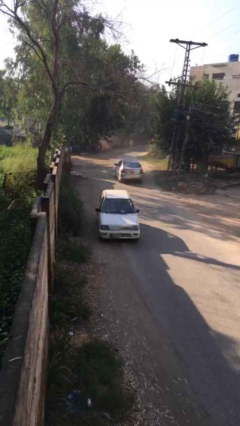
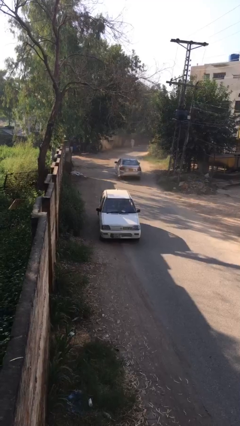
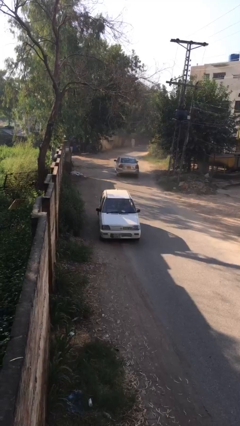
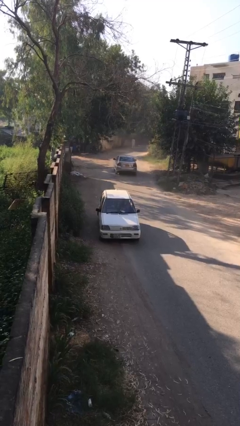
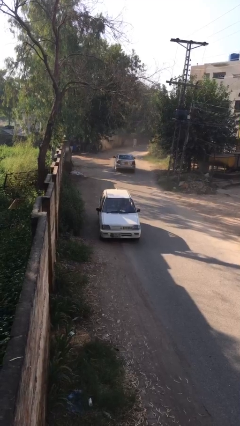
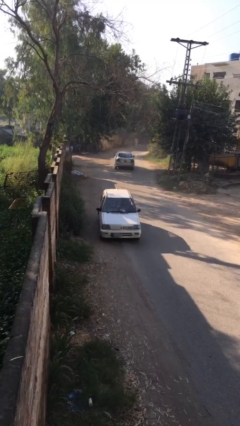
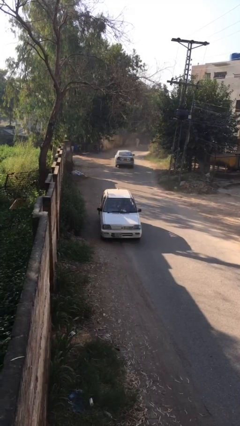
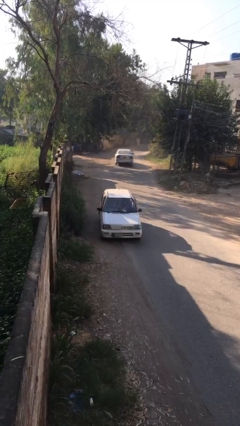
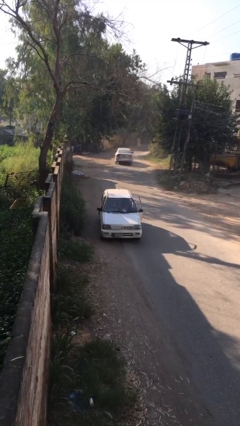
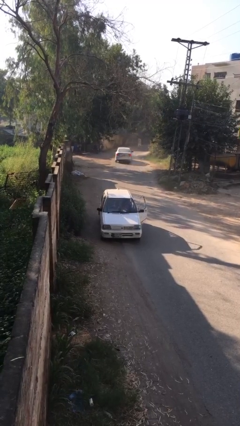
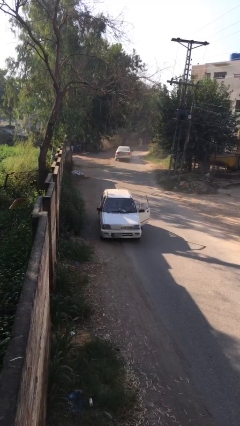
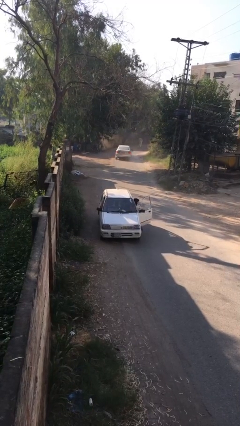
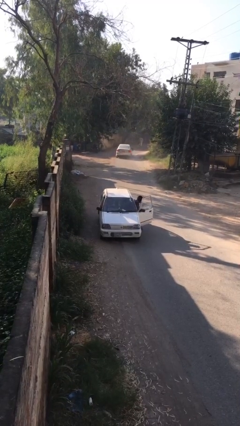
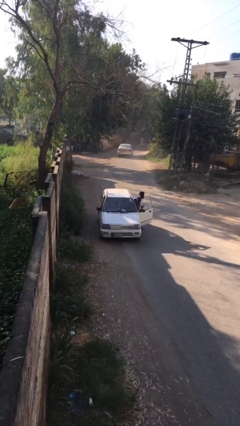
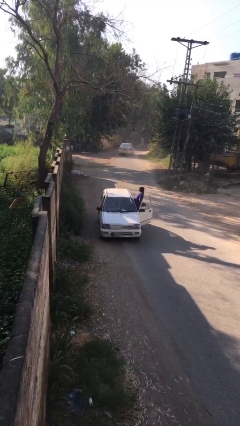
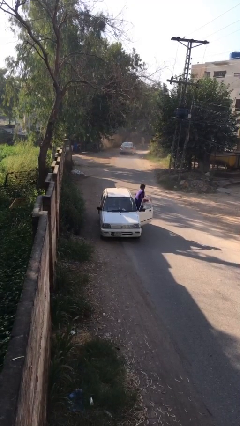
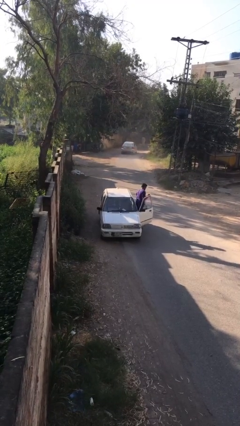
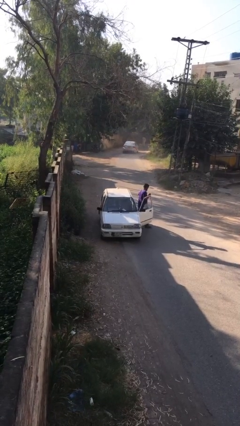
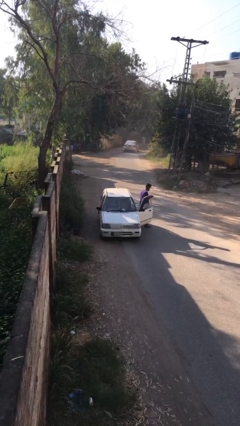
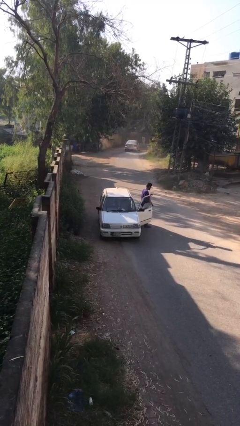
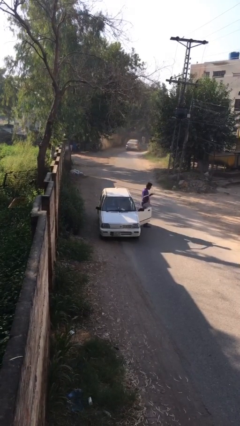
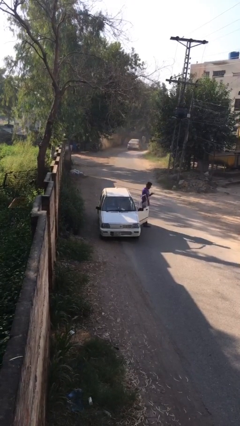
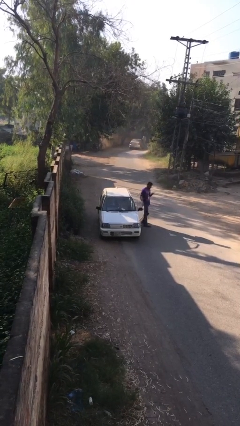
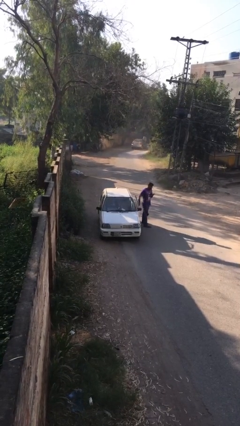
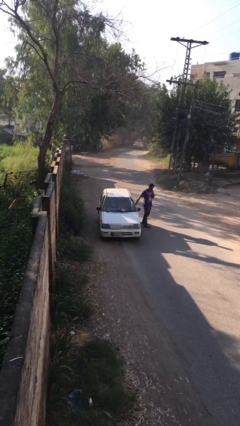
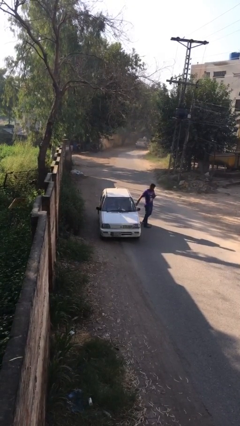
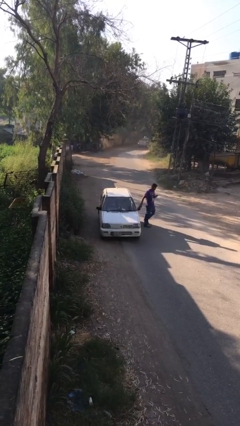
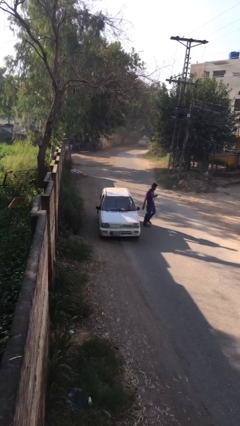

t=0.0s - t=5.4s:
car drops off person

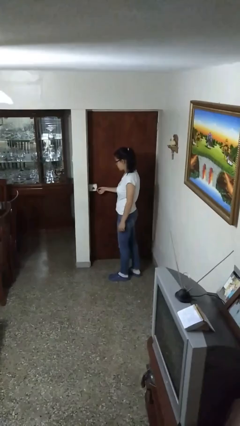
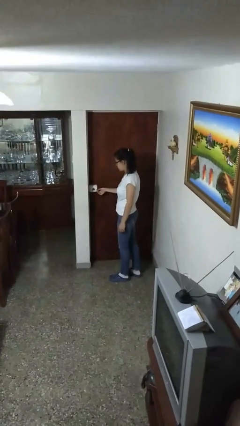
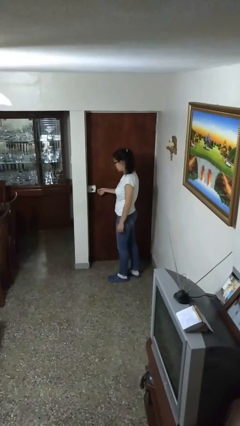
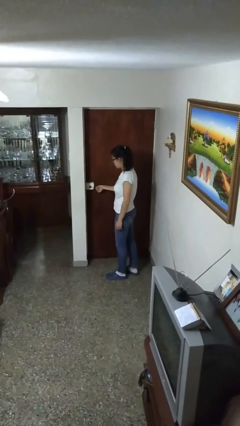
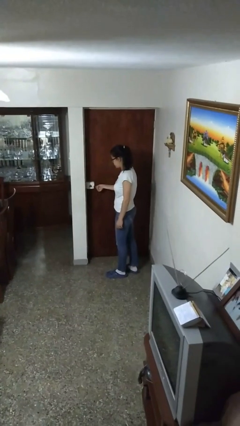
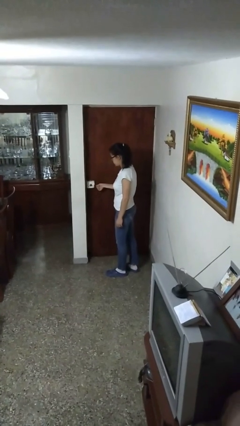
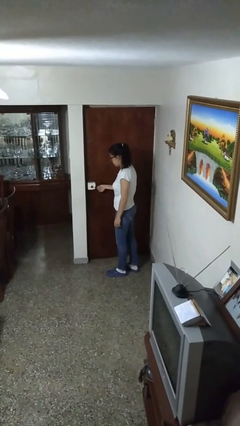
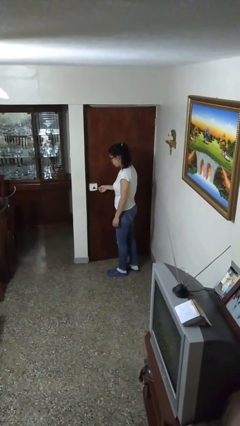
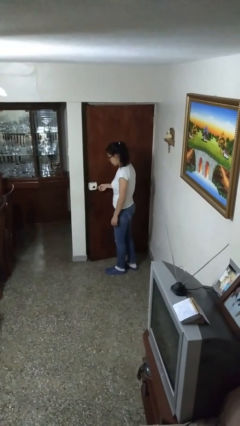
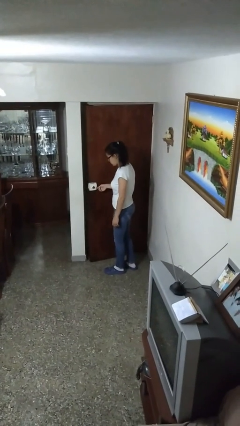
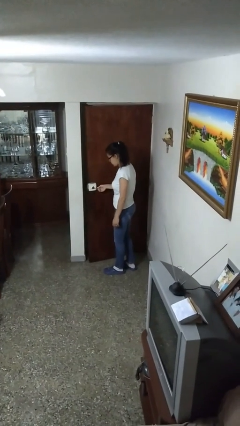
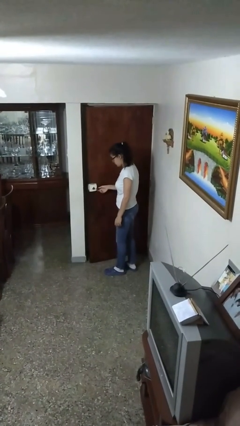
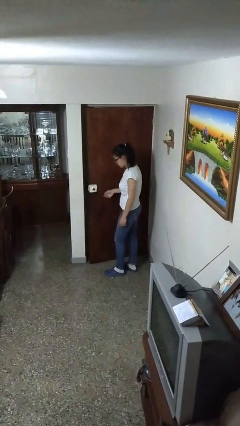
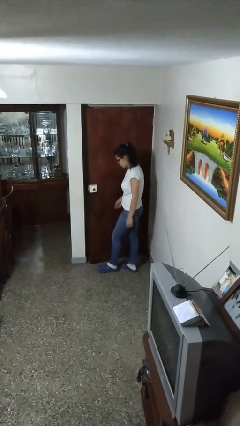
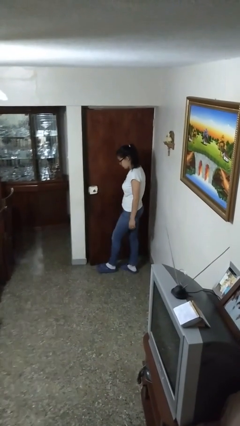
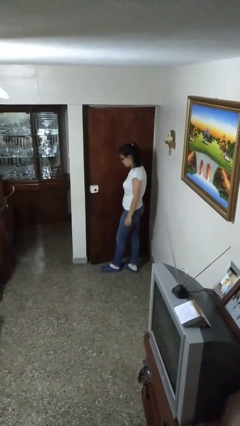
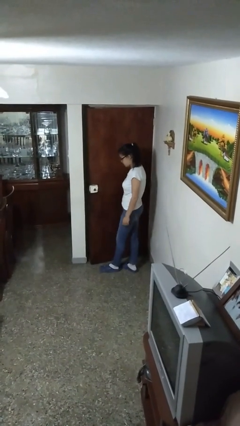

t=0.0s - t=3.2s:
person opens facility door

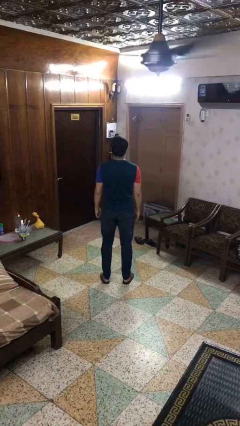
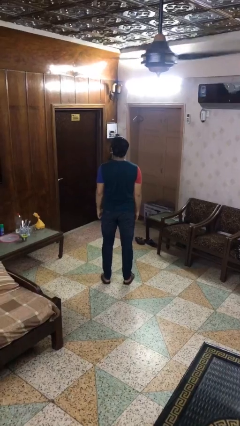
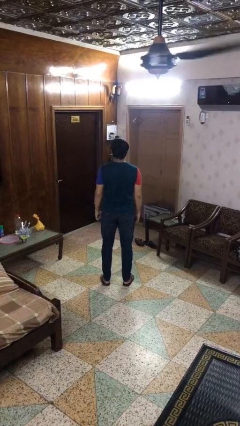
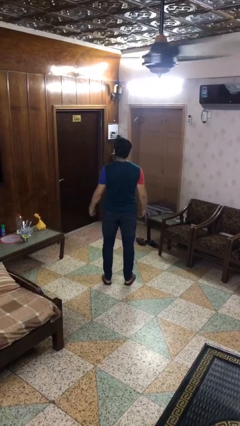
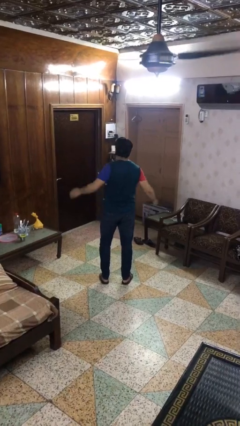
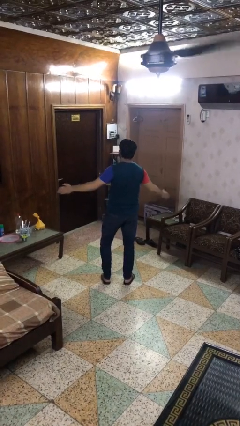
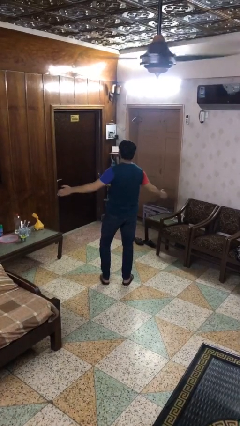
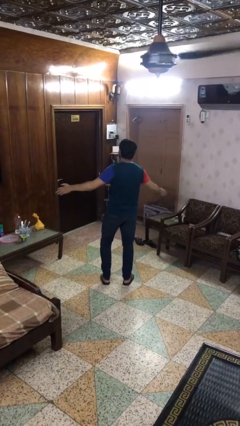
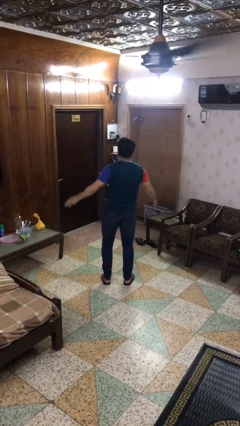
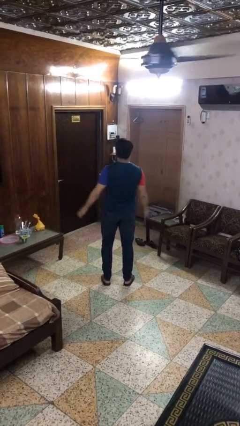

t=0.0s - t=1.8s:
person dances in place

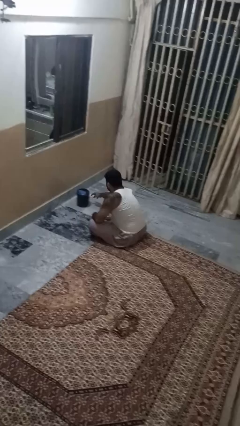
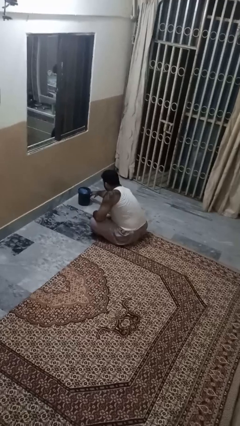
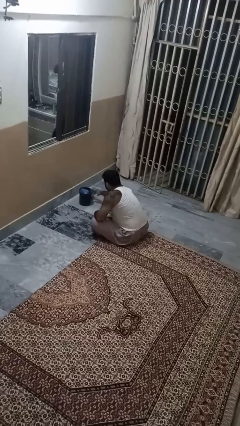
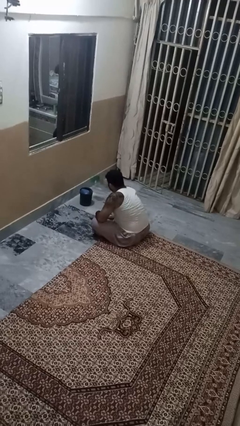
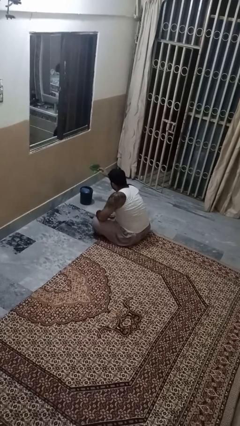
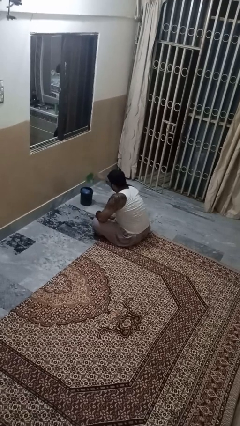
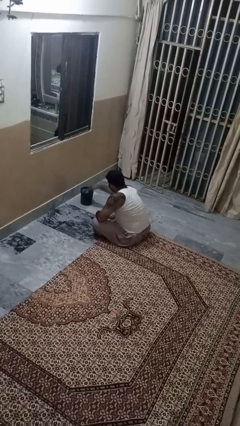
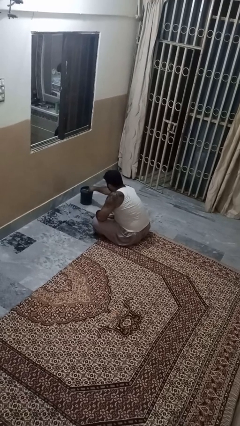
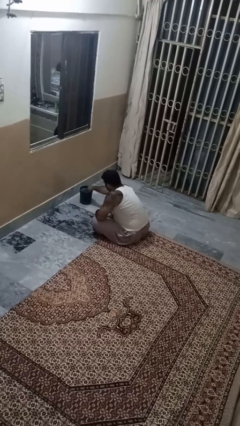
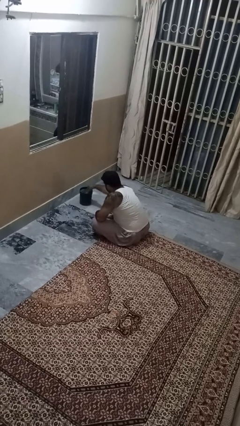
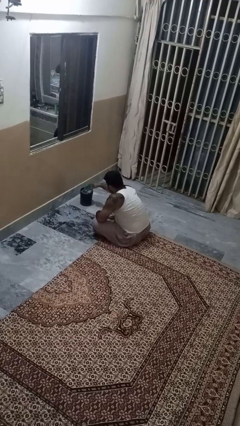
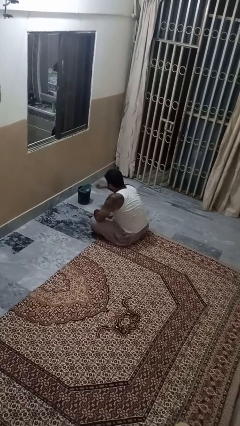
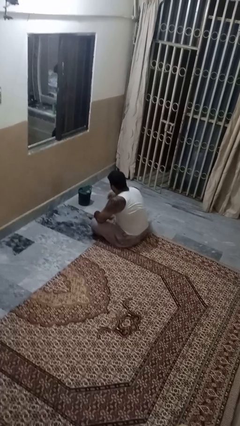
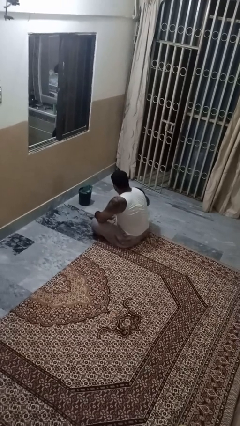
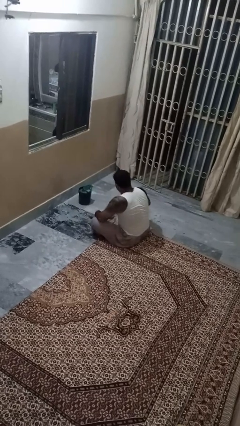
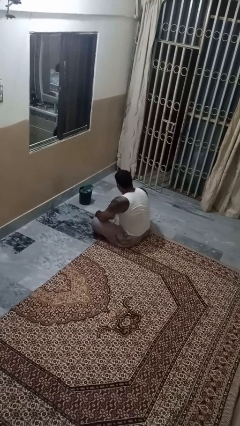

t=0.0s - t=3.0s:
person discards trash

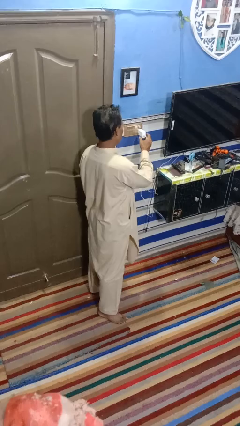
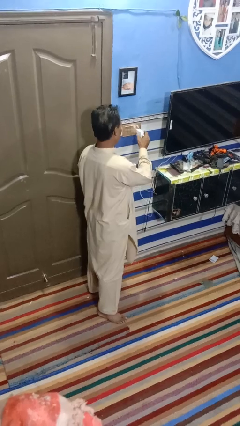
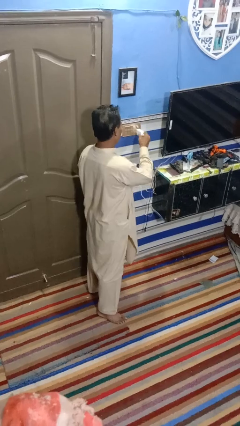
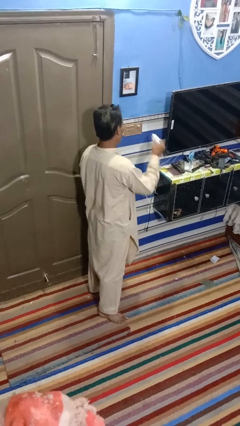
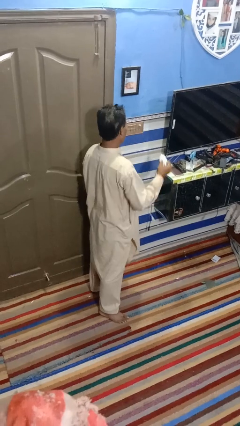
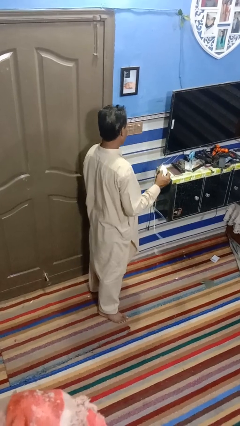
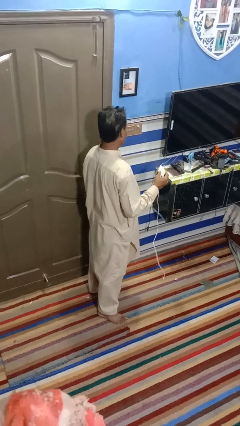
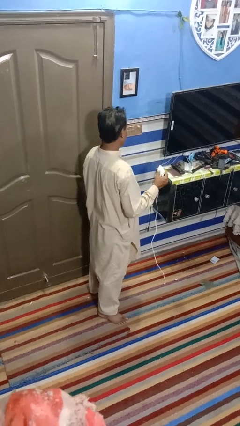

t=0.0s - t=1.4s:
person unplugs from electrical socket

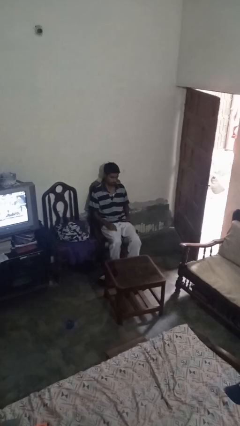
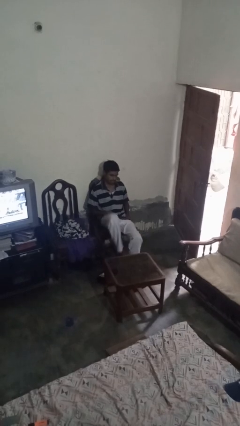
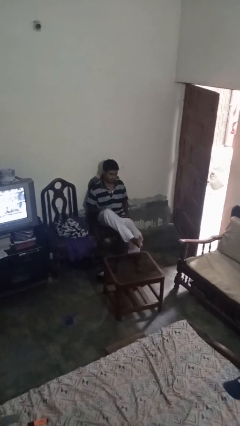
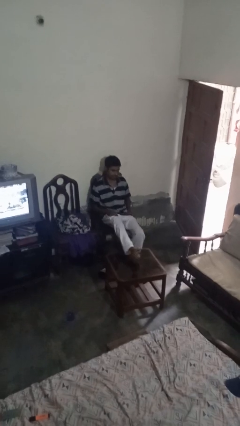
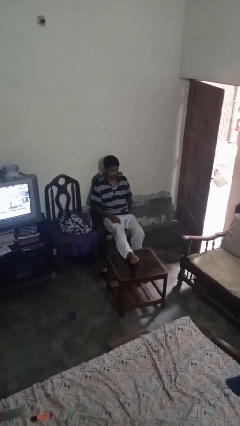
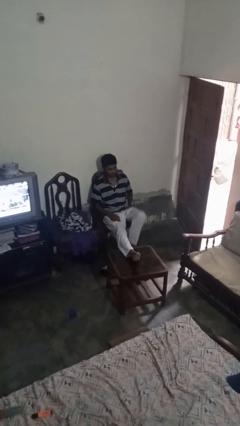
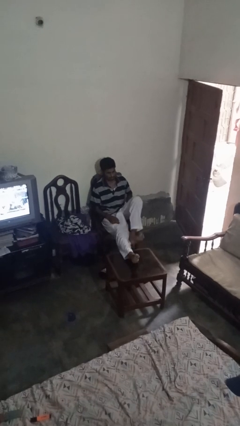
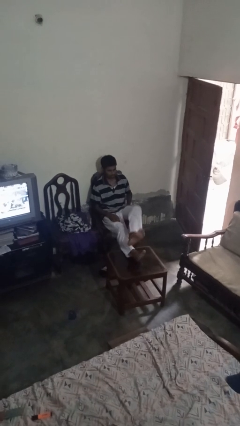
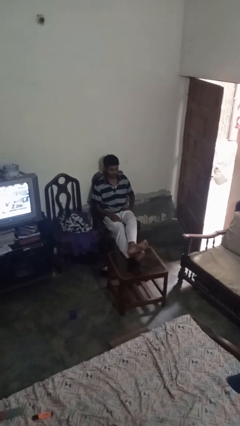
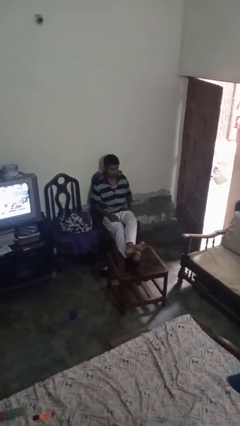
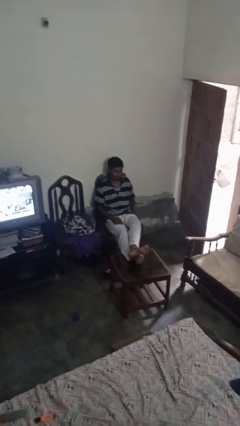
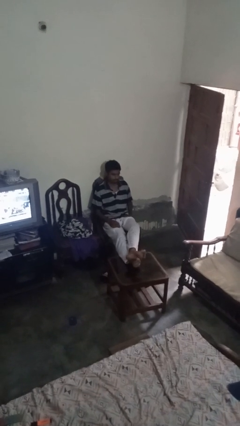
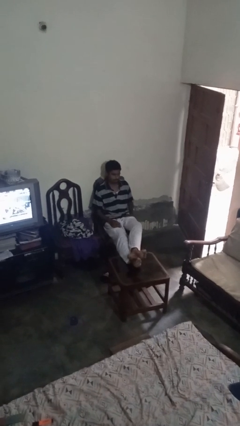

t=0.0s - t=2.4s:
person puts feet up
